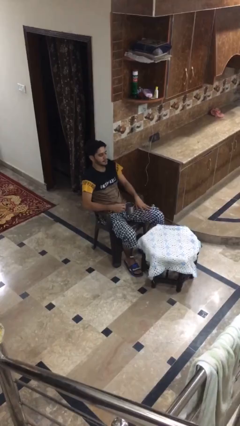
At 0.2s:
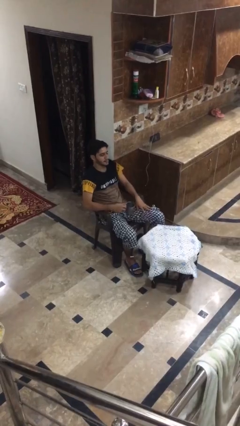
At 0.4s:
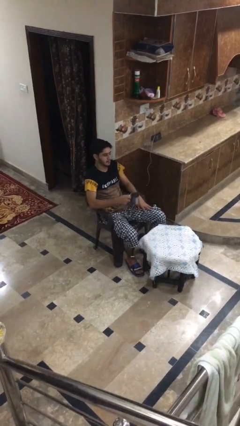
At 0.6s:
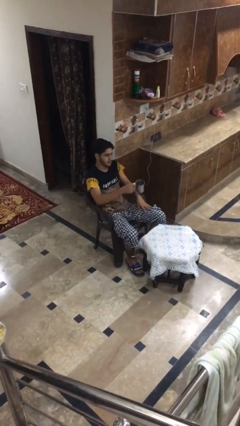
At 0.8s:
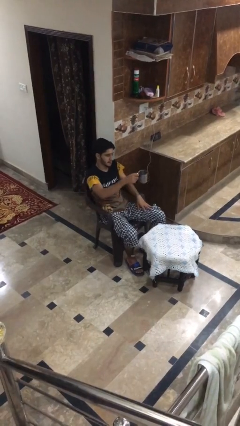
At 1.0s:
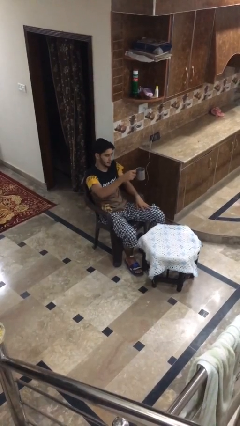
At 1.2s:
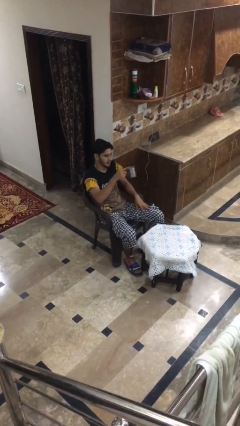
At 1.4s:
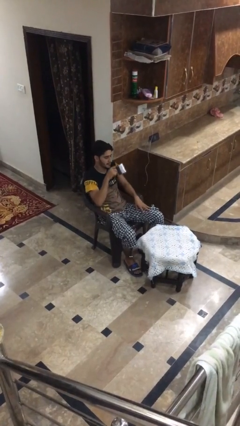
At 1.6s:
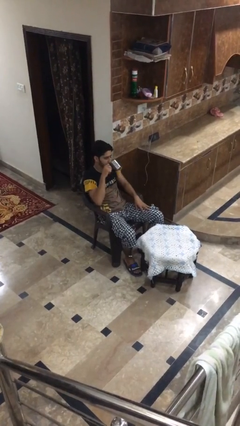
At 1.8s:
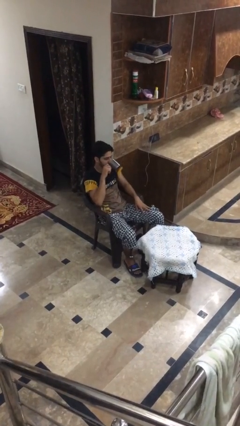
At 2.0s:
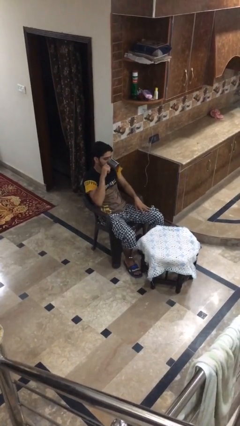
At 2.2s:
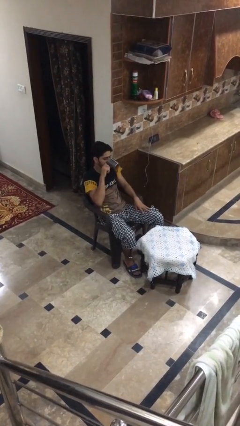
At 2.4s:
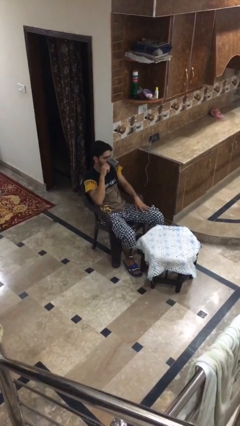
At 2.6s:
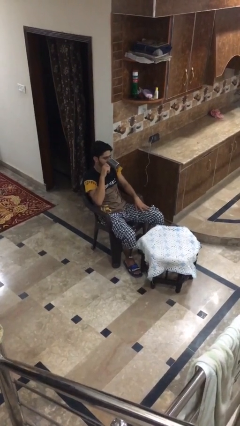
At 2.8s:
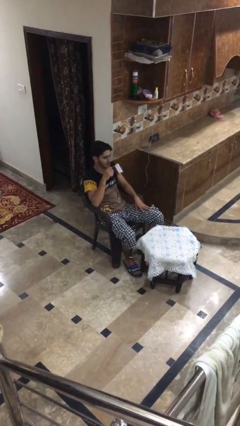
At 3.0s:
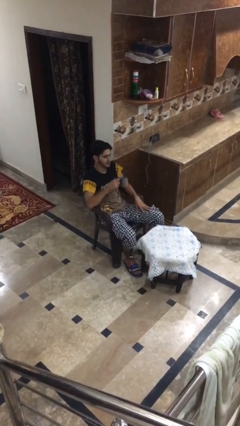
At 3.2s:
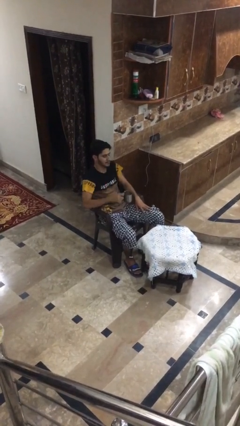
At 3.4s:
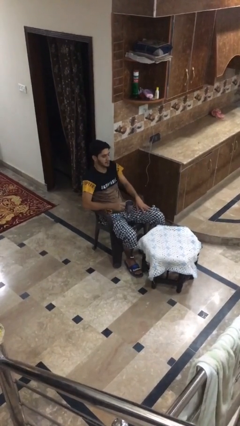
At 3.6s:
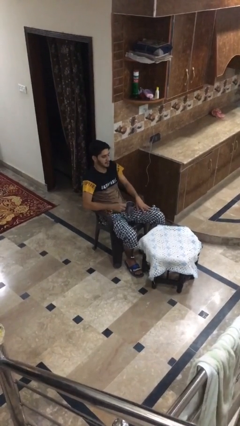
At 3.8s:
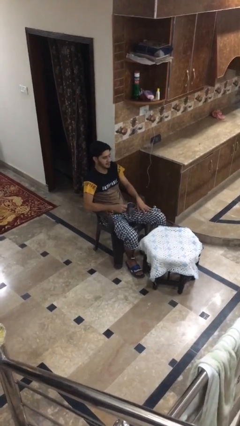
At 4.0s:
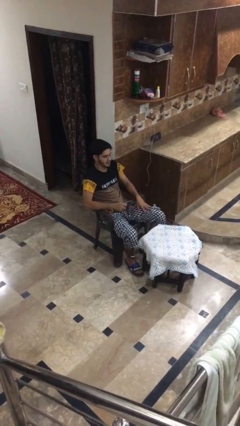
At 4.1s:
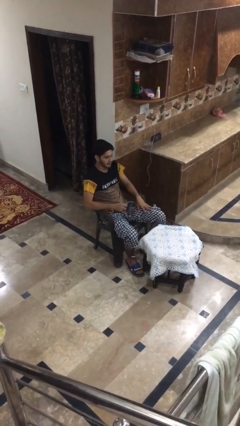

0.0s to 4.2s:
person drinks from shotglass

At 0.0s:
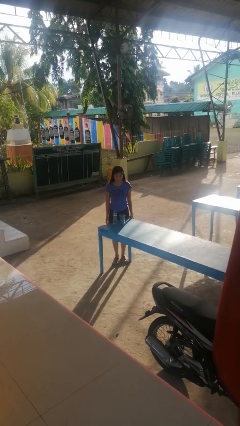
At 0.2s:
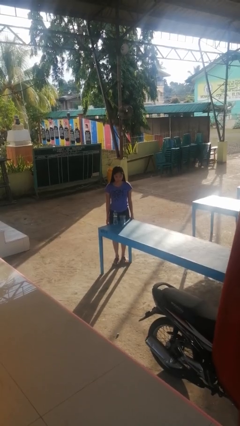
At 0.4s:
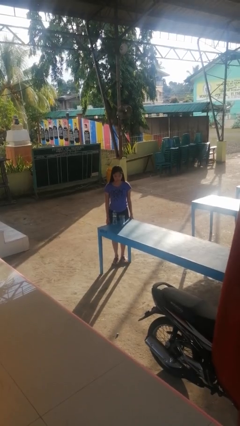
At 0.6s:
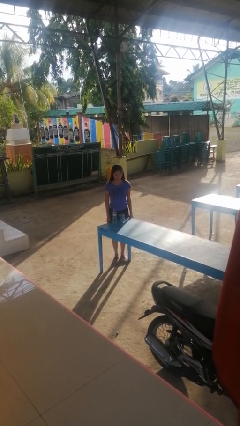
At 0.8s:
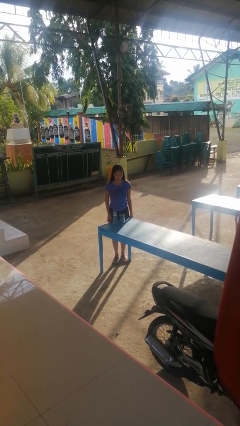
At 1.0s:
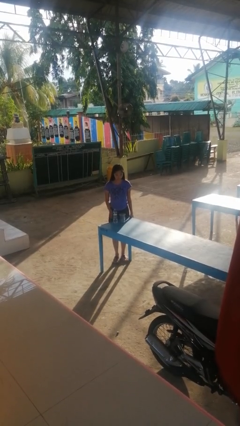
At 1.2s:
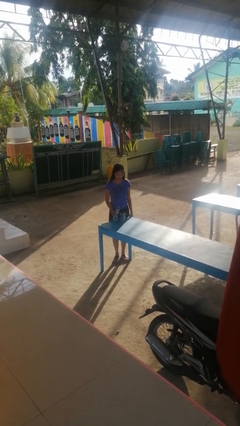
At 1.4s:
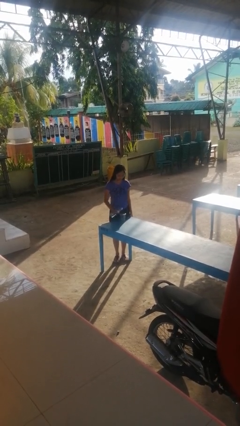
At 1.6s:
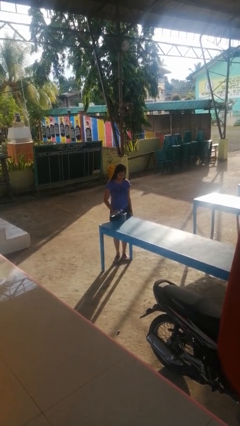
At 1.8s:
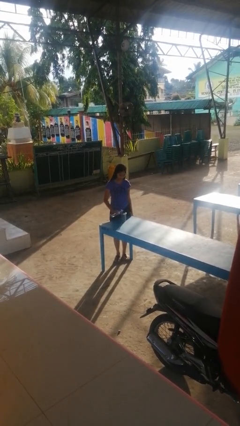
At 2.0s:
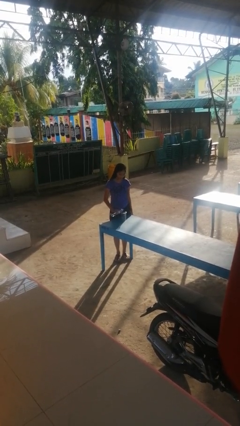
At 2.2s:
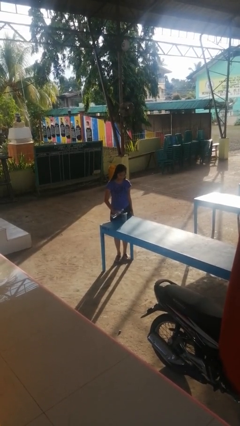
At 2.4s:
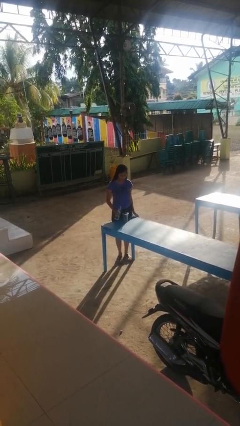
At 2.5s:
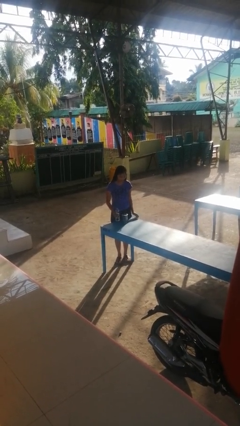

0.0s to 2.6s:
person pours liquid into cup

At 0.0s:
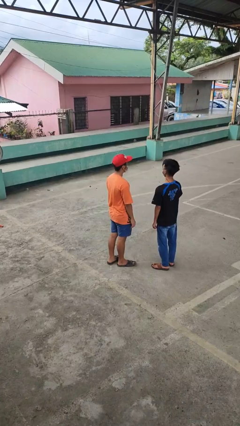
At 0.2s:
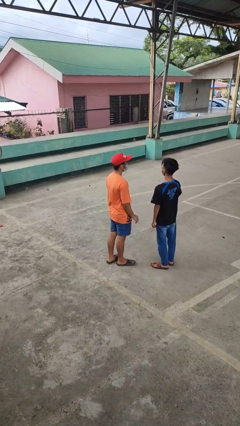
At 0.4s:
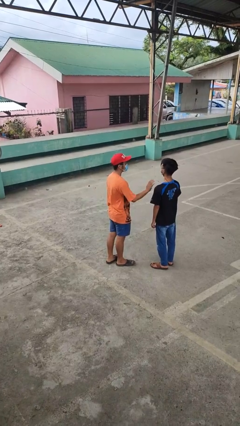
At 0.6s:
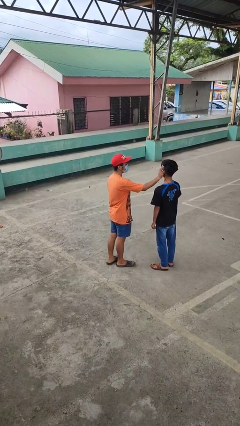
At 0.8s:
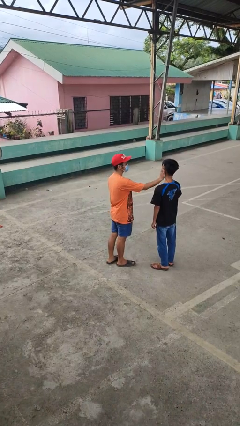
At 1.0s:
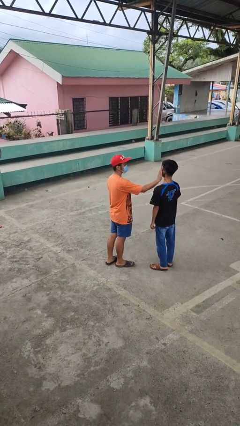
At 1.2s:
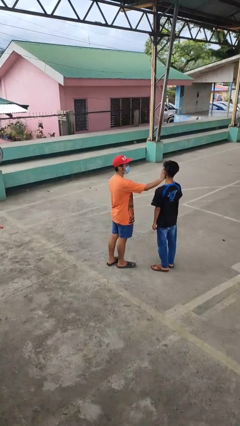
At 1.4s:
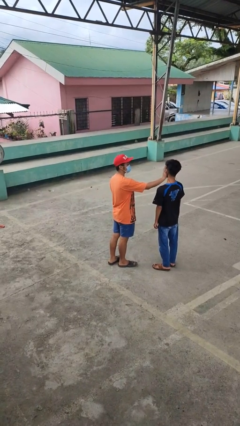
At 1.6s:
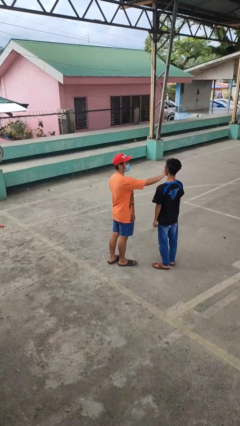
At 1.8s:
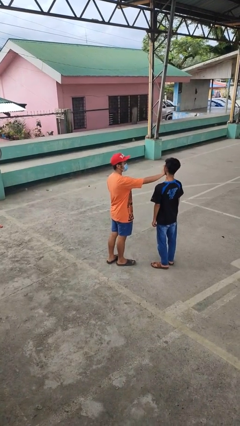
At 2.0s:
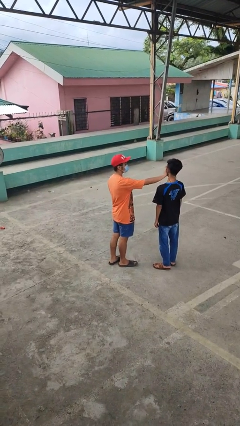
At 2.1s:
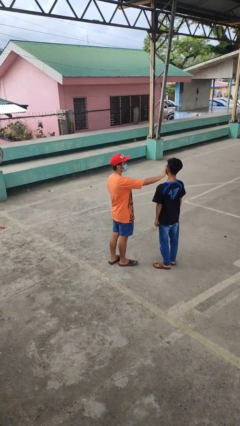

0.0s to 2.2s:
person touches face of person

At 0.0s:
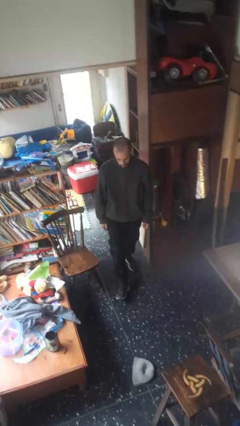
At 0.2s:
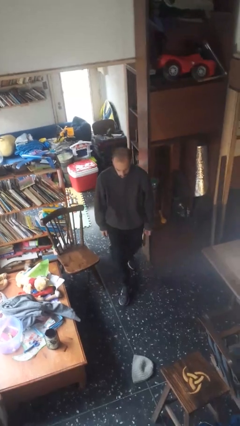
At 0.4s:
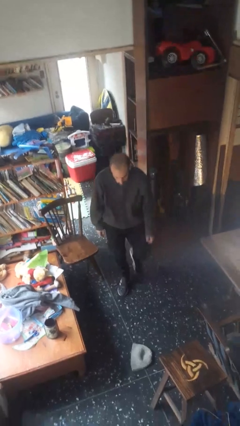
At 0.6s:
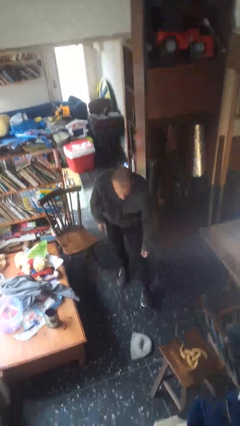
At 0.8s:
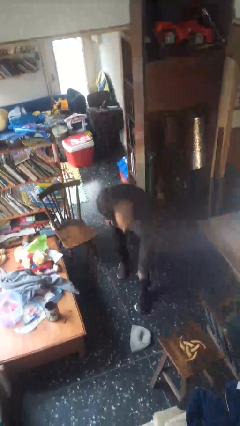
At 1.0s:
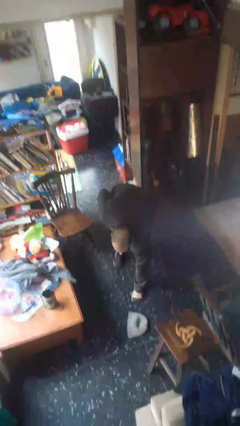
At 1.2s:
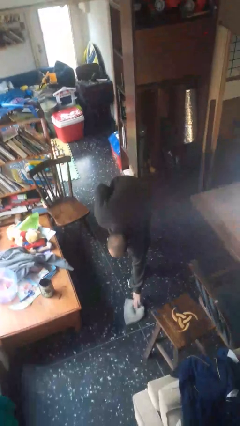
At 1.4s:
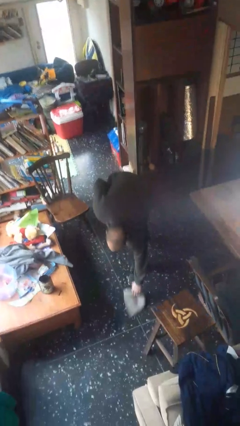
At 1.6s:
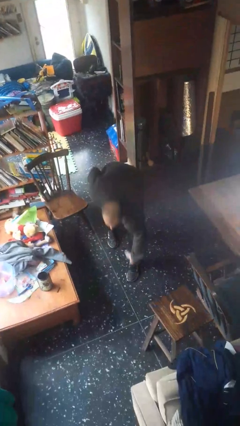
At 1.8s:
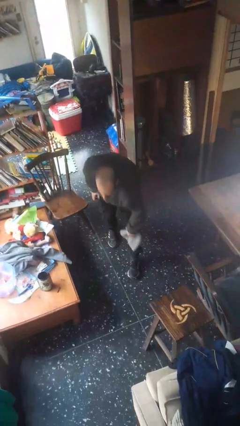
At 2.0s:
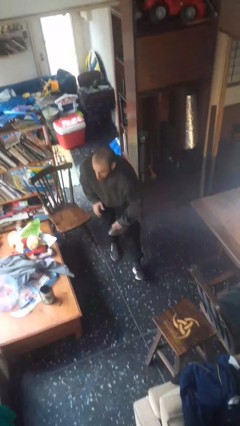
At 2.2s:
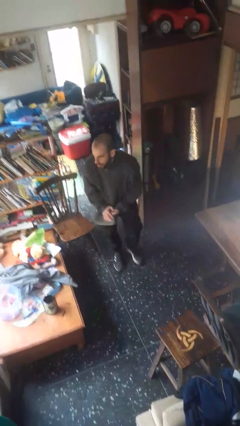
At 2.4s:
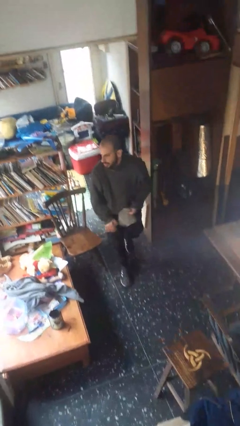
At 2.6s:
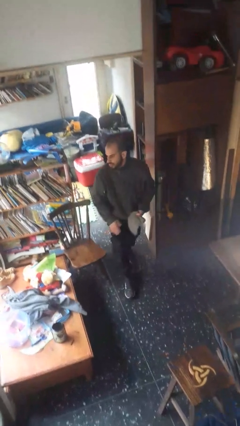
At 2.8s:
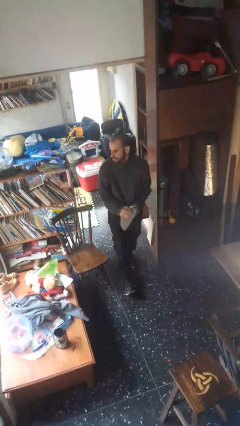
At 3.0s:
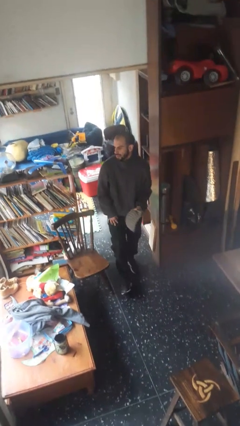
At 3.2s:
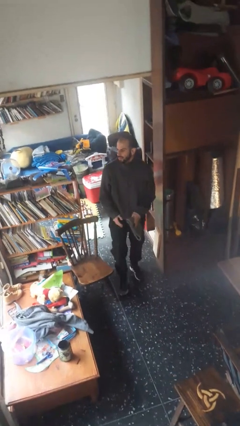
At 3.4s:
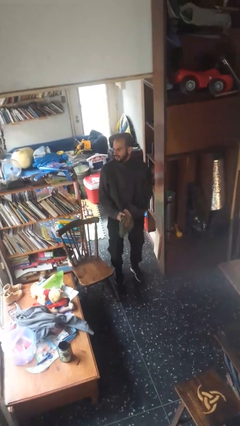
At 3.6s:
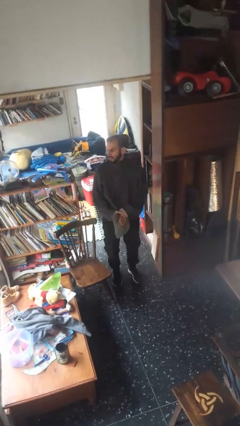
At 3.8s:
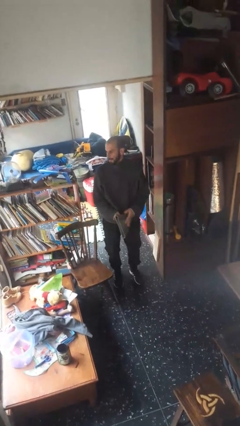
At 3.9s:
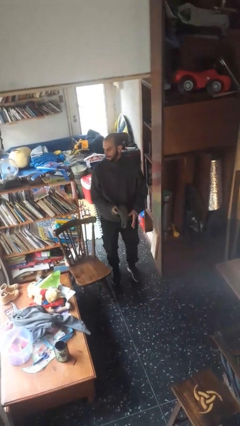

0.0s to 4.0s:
person picks up object from floor

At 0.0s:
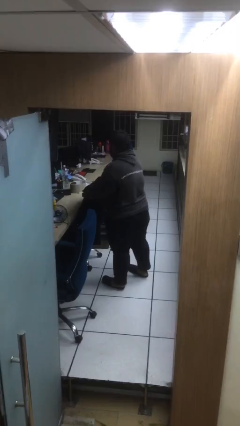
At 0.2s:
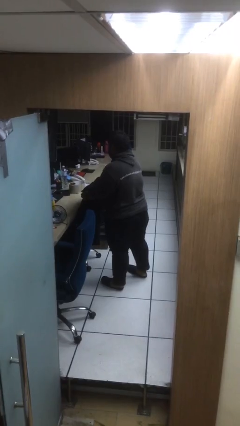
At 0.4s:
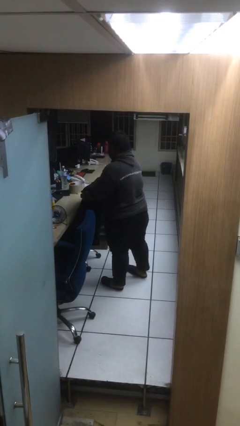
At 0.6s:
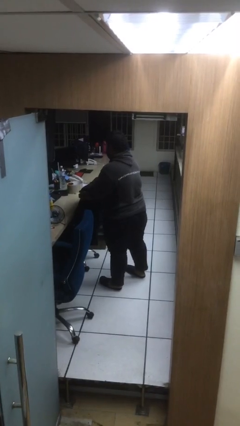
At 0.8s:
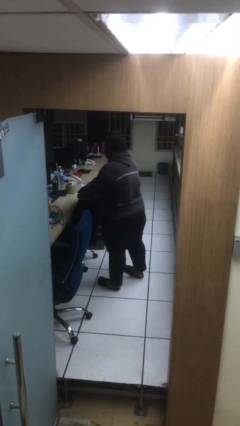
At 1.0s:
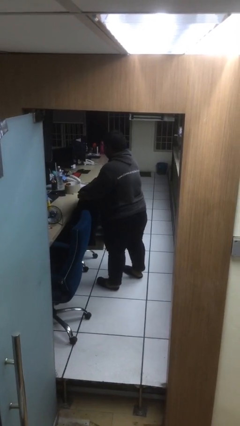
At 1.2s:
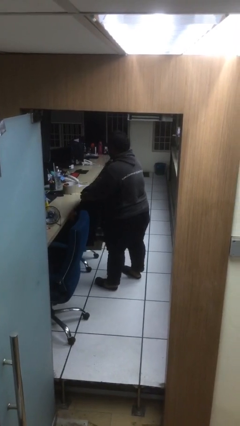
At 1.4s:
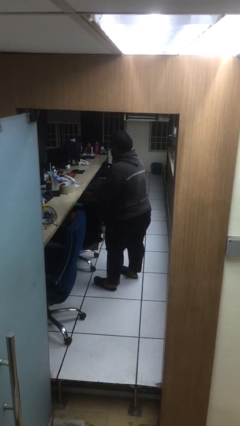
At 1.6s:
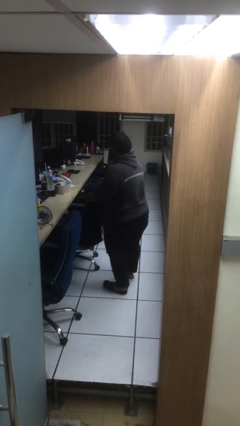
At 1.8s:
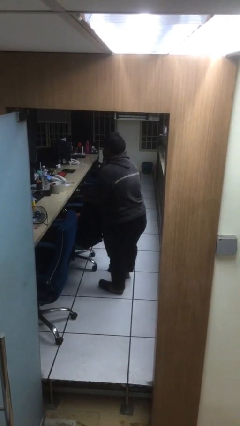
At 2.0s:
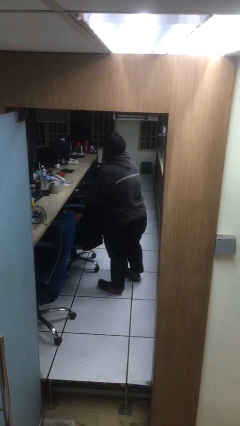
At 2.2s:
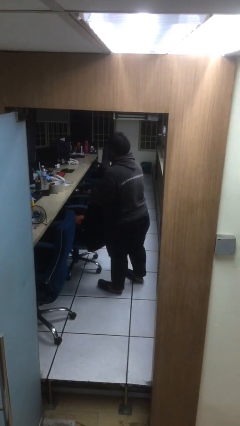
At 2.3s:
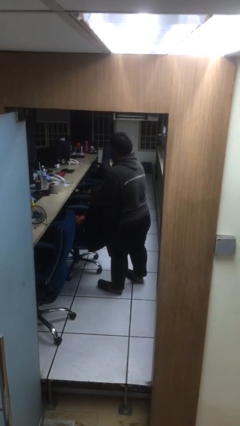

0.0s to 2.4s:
person pulls out chair

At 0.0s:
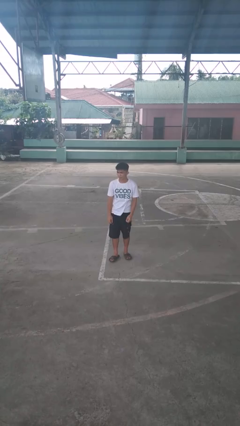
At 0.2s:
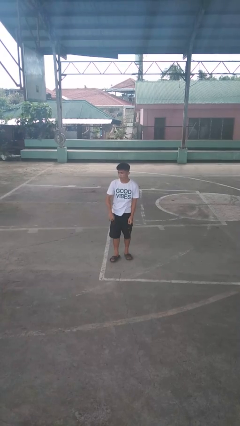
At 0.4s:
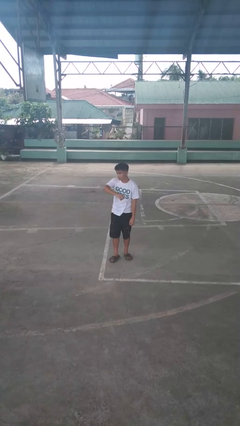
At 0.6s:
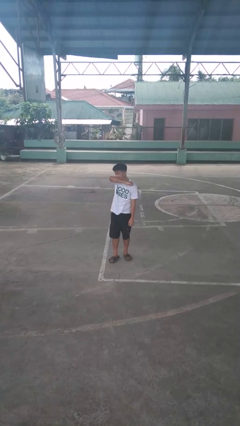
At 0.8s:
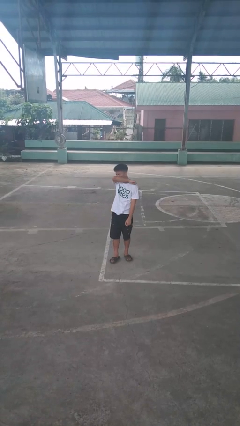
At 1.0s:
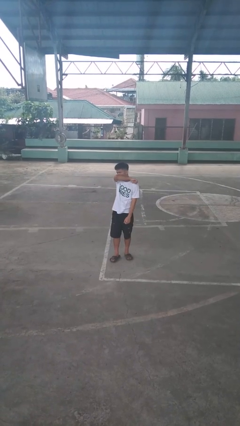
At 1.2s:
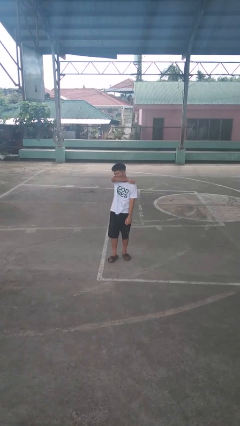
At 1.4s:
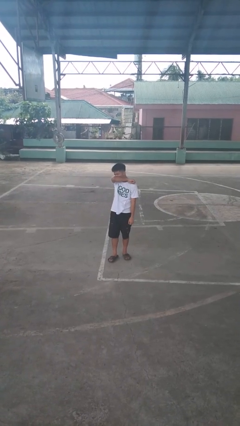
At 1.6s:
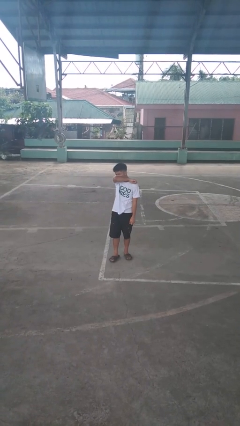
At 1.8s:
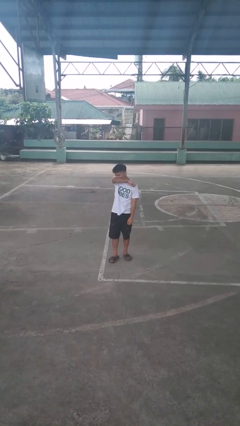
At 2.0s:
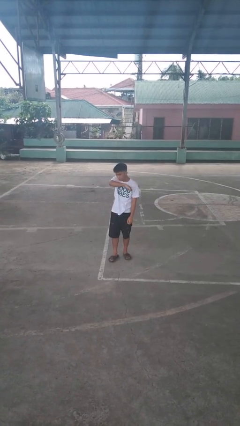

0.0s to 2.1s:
person sneezes into arm
